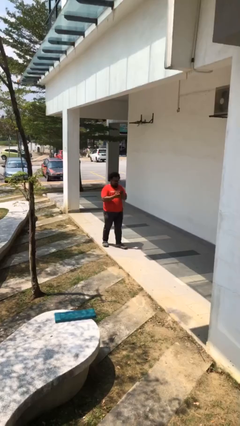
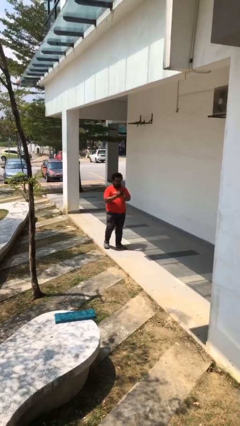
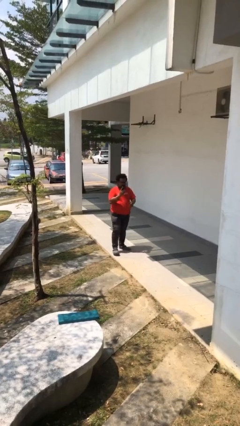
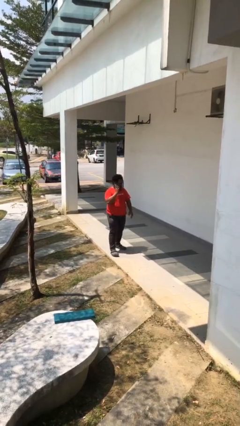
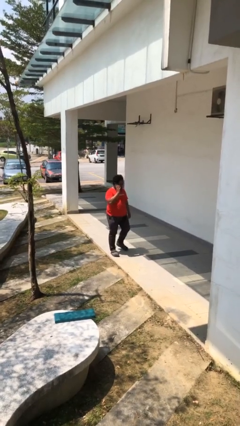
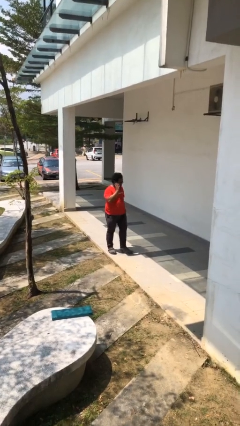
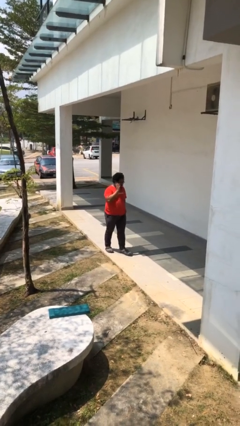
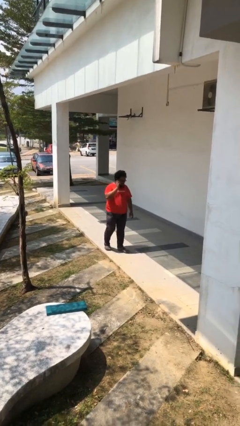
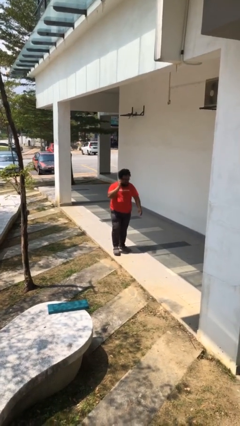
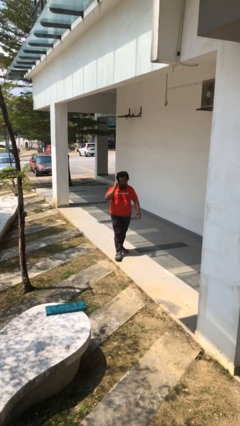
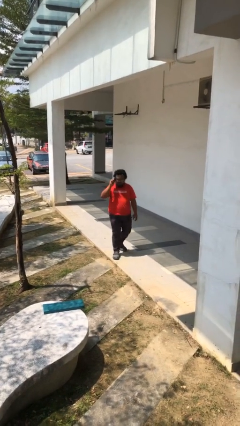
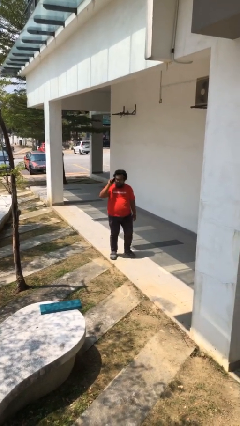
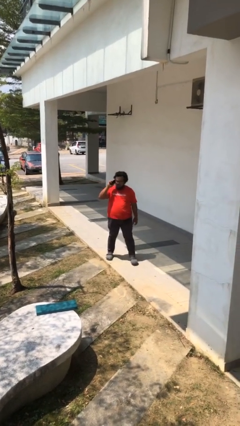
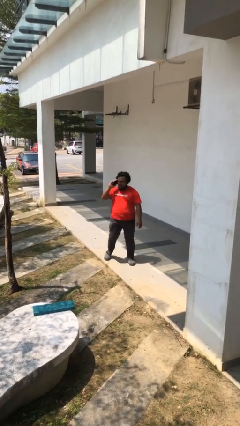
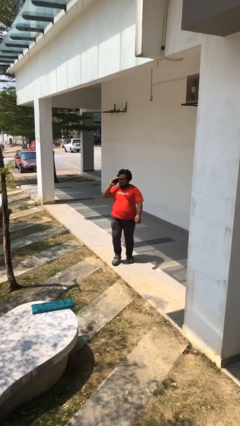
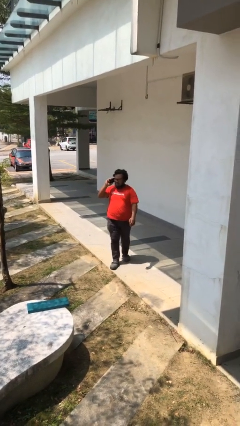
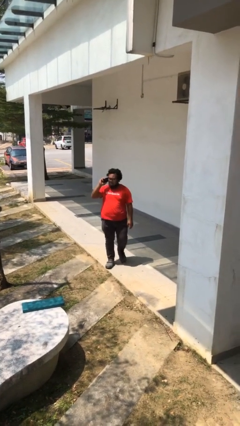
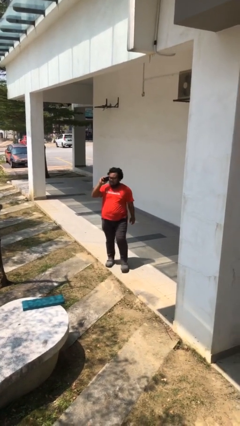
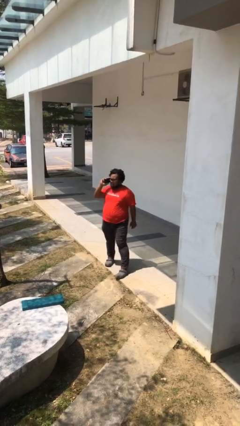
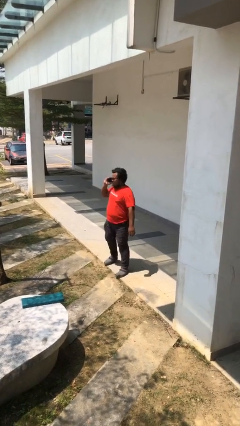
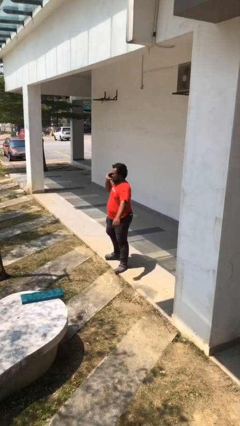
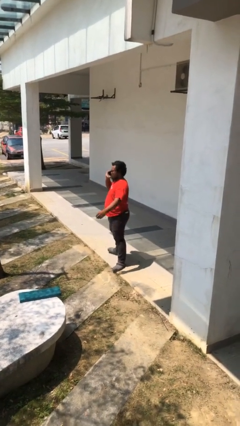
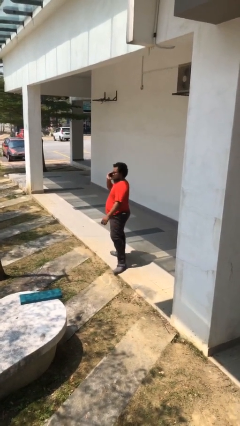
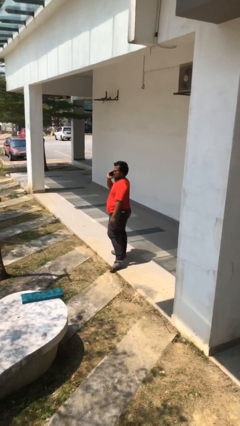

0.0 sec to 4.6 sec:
person talks on phone

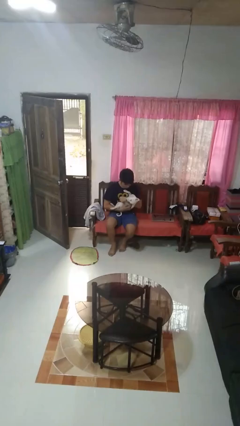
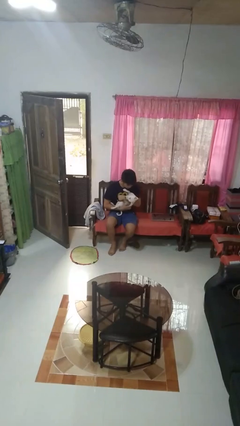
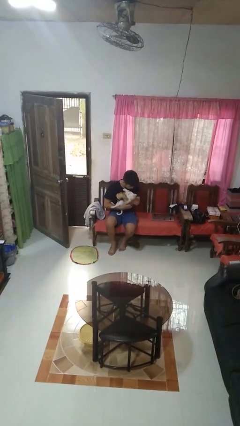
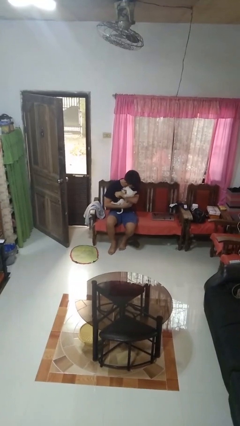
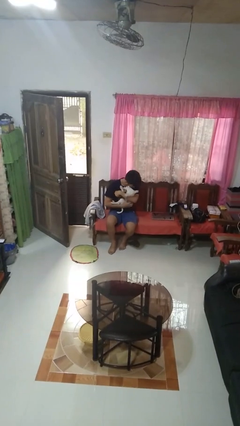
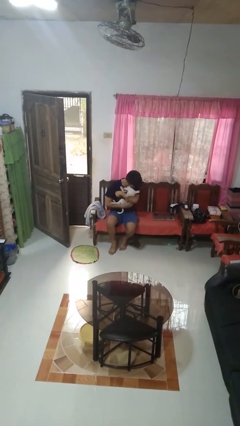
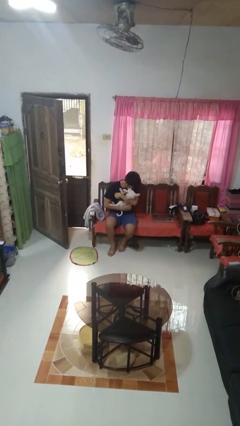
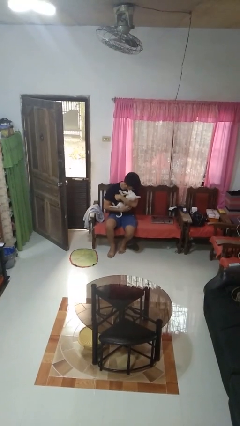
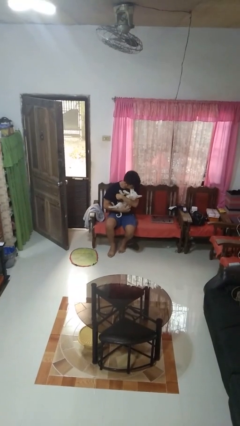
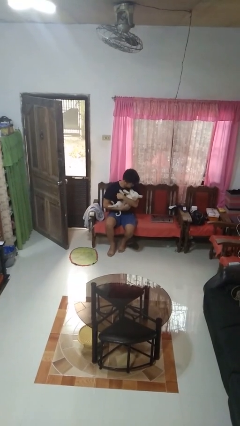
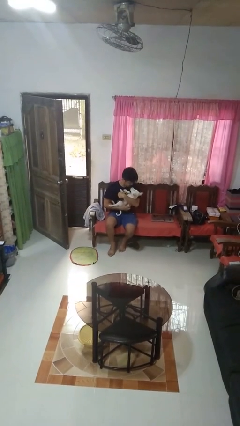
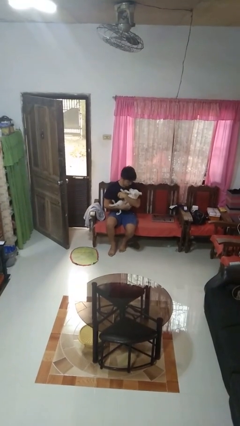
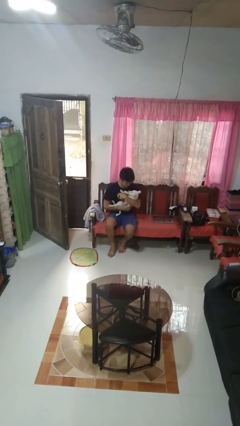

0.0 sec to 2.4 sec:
person hugs dog

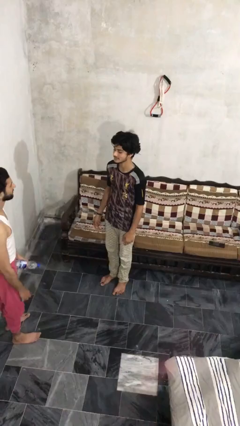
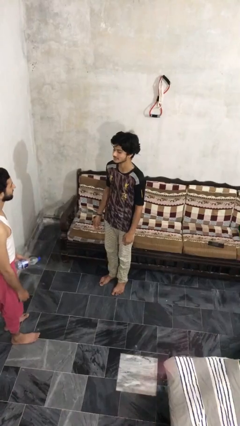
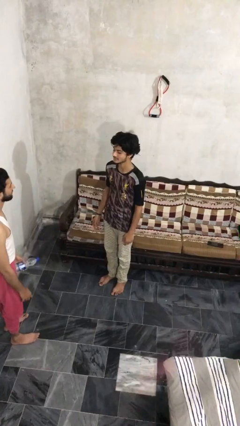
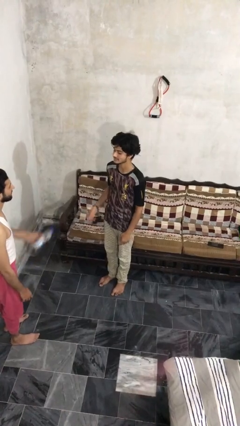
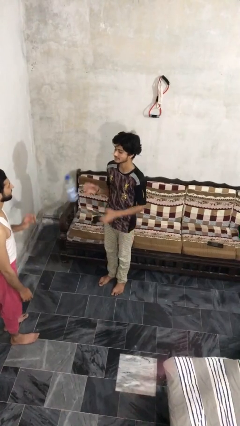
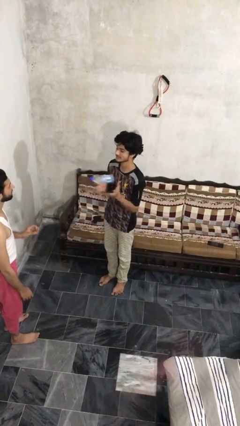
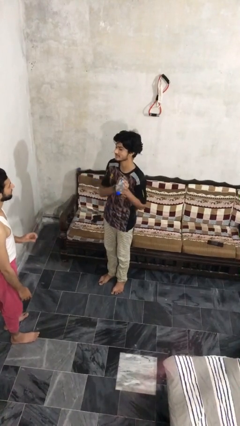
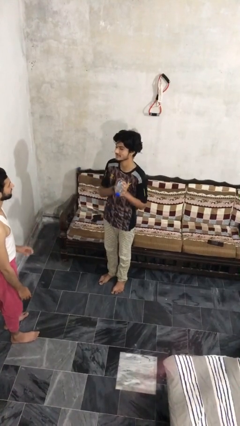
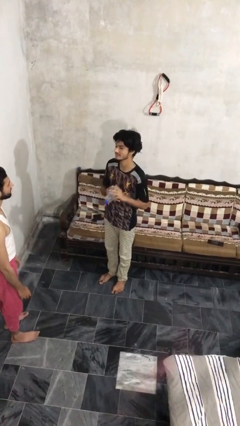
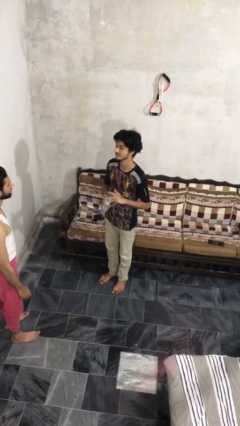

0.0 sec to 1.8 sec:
person catches object from person

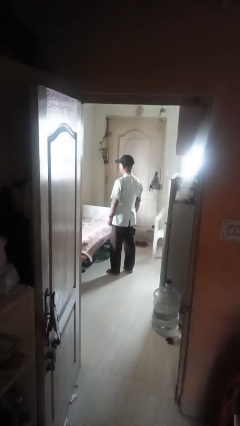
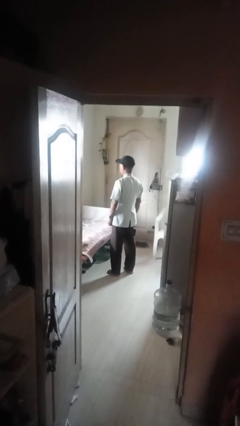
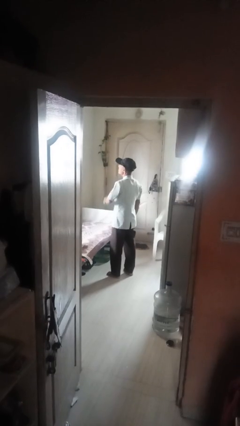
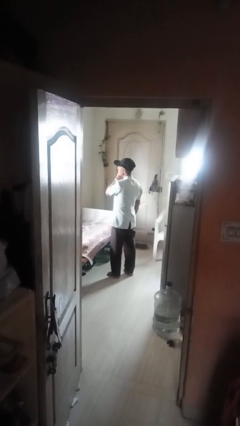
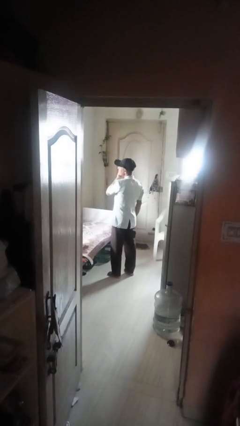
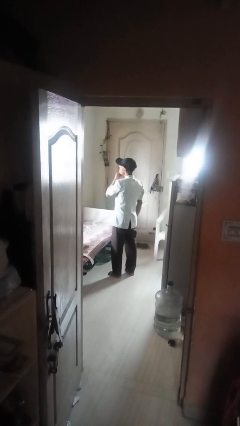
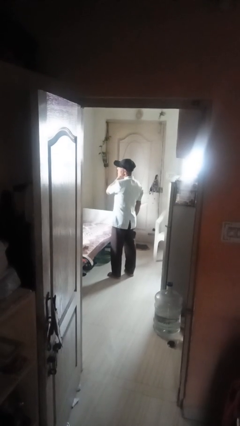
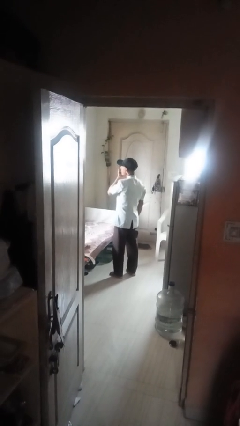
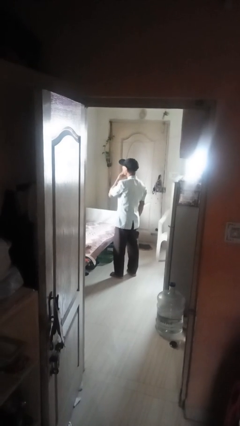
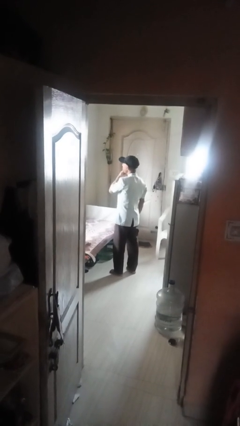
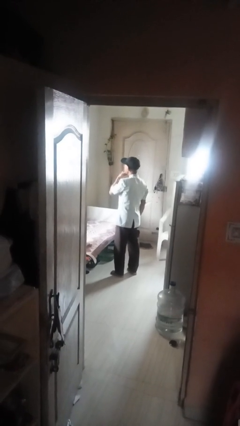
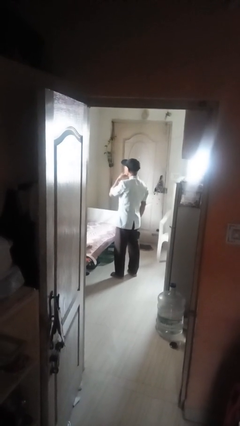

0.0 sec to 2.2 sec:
person strokes chin

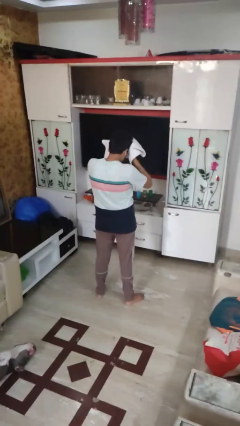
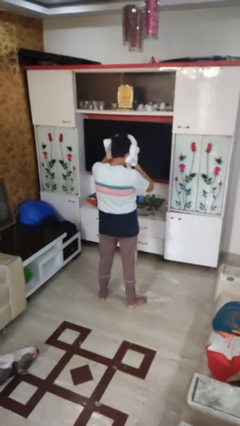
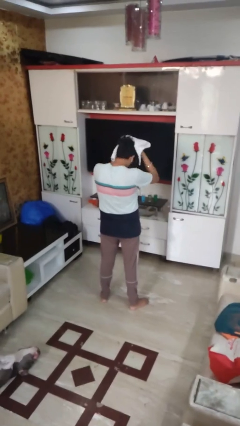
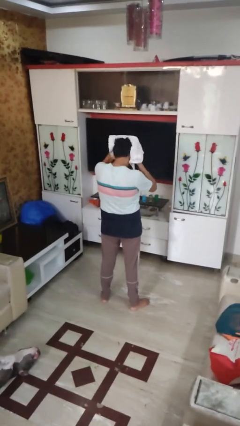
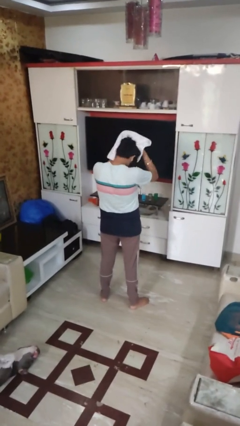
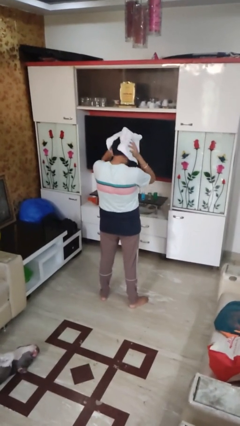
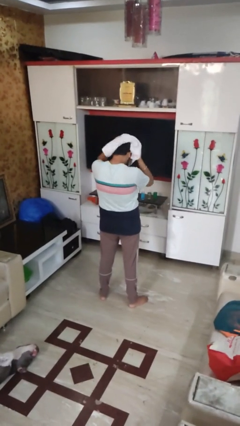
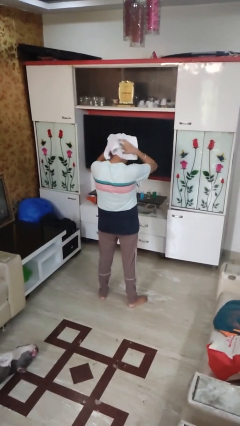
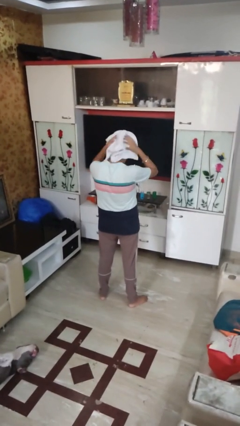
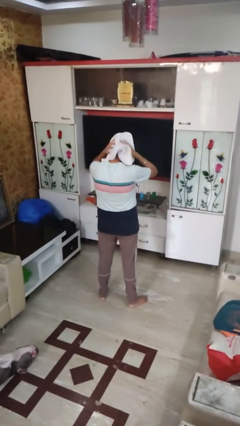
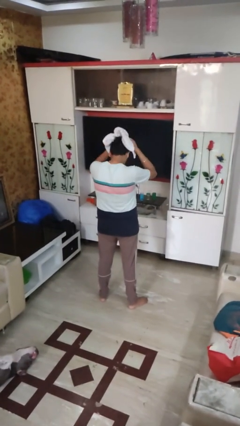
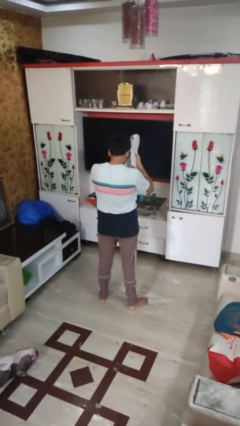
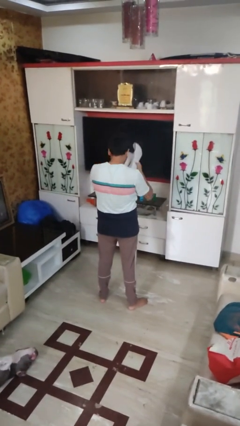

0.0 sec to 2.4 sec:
person dries hair with towel

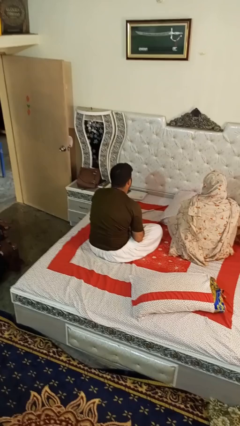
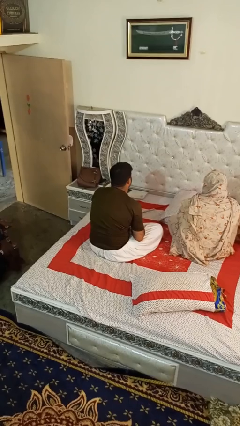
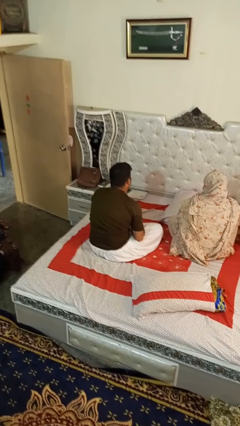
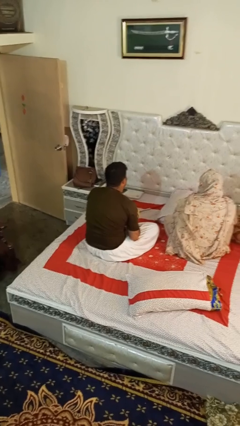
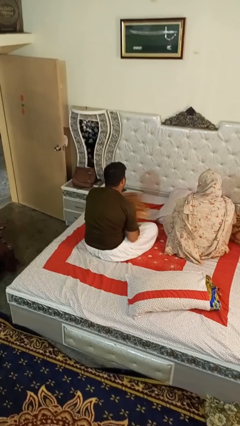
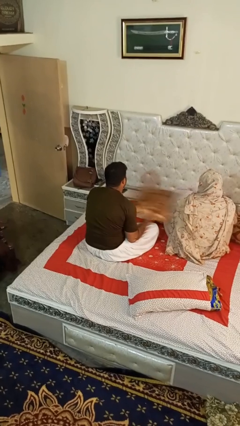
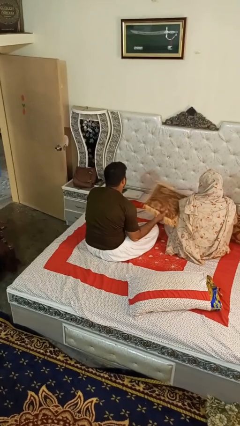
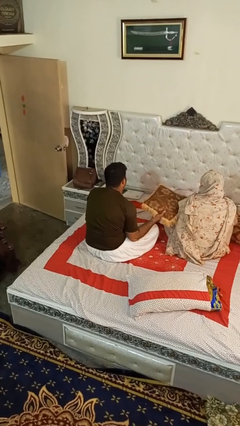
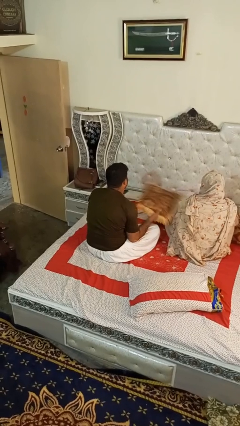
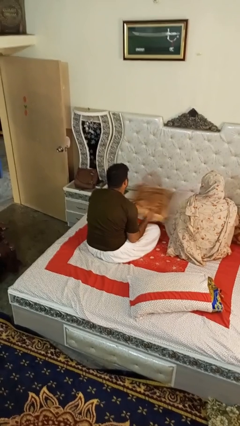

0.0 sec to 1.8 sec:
person hits person with pillow

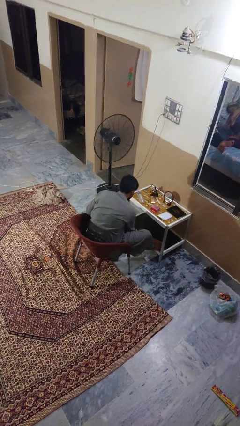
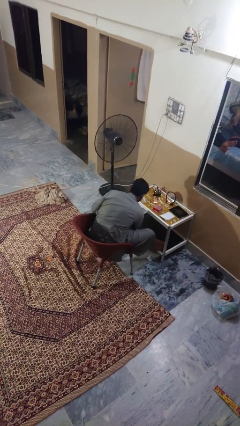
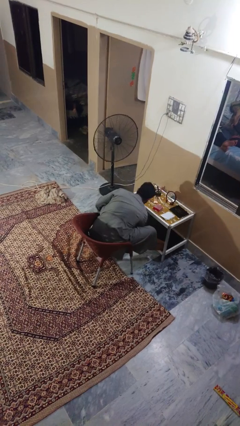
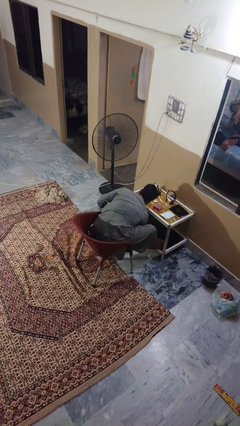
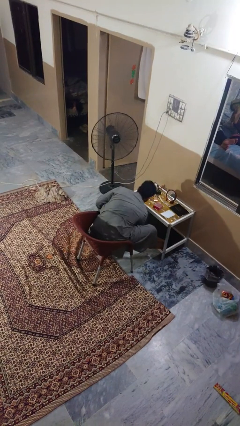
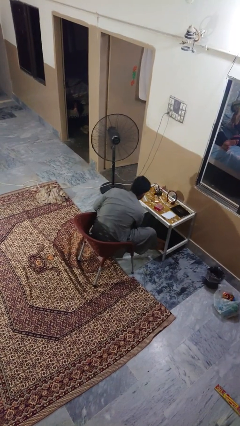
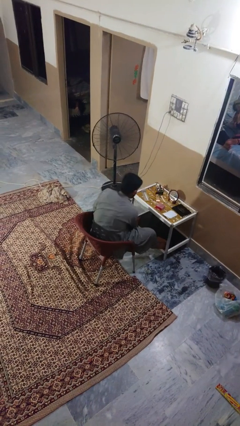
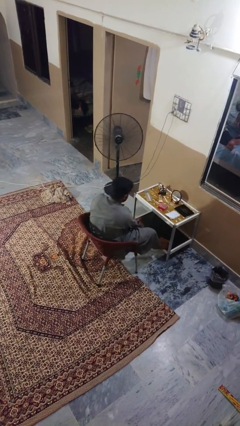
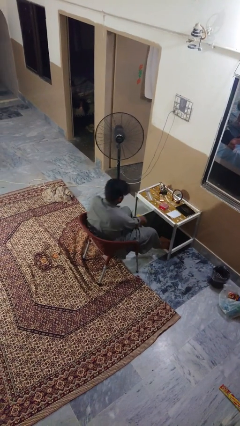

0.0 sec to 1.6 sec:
person picks up object from floor

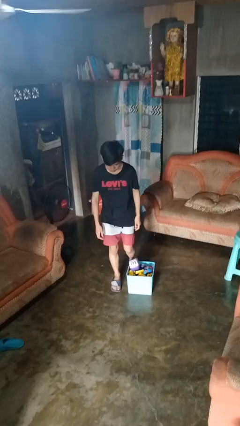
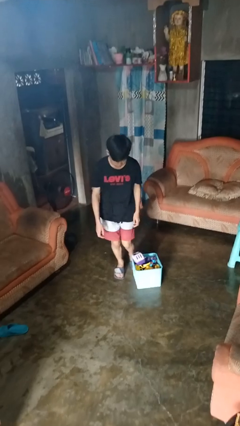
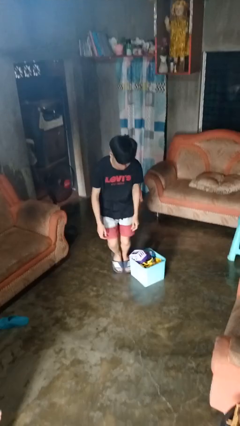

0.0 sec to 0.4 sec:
person trips on object on floor
